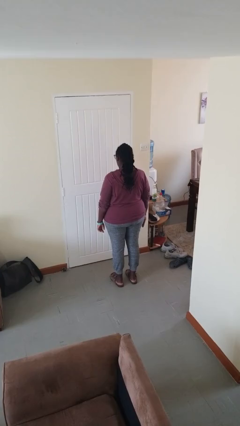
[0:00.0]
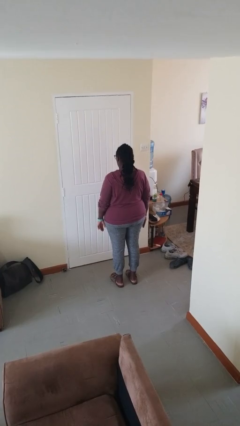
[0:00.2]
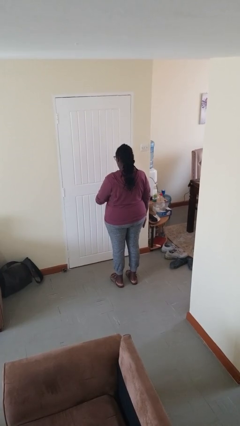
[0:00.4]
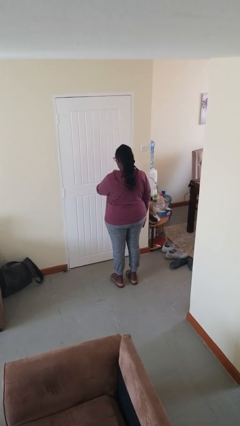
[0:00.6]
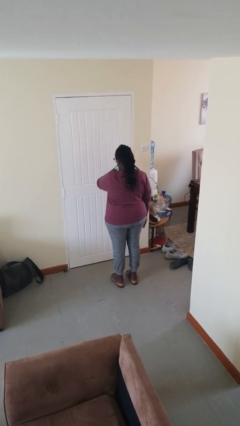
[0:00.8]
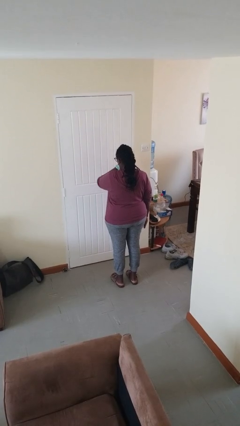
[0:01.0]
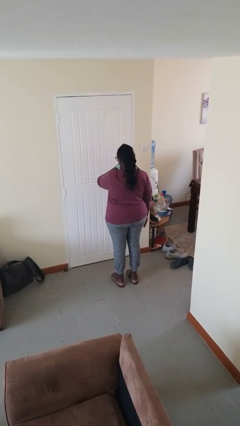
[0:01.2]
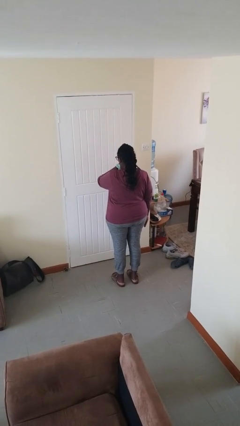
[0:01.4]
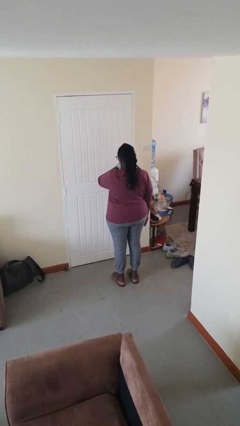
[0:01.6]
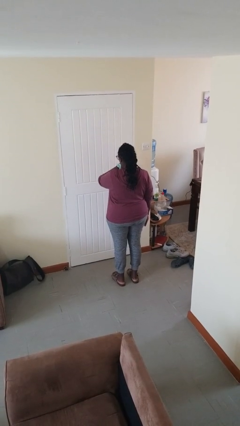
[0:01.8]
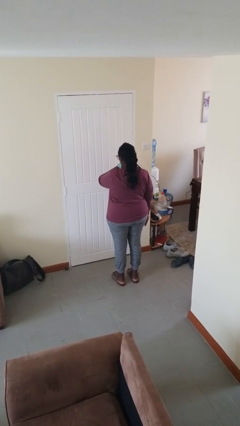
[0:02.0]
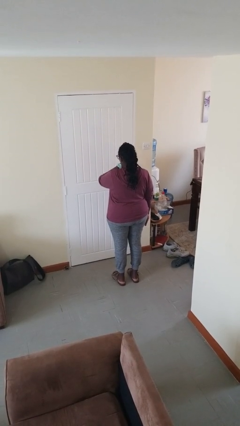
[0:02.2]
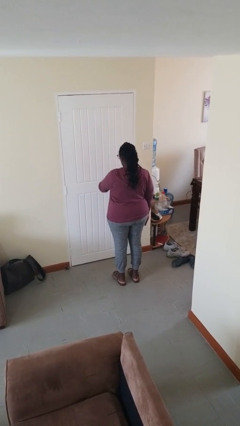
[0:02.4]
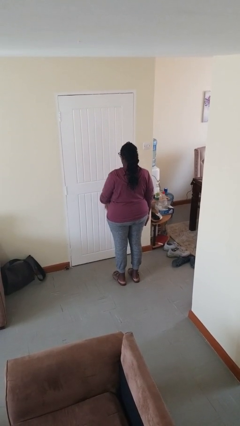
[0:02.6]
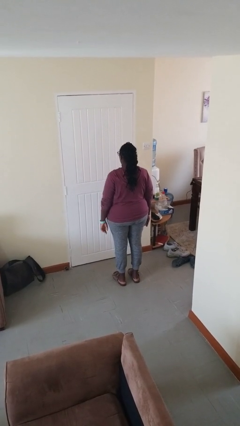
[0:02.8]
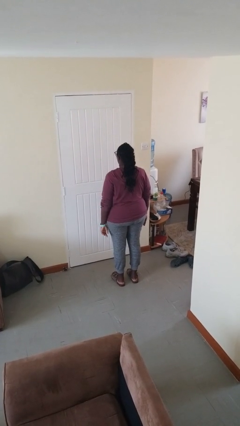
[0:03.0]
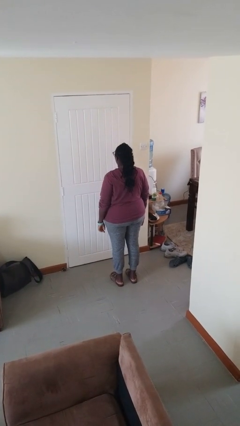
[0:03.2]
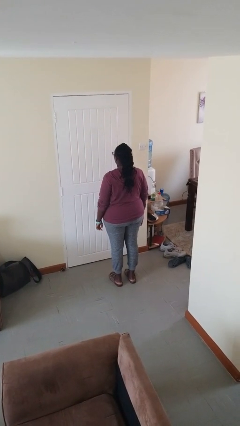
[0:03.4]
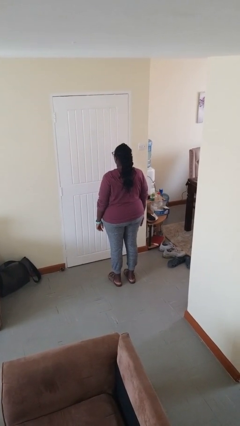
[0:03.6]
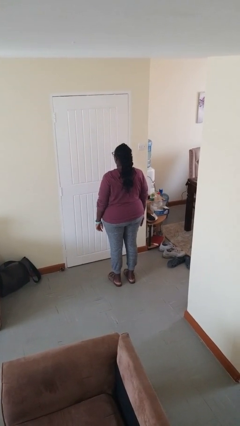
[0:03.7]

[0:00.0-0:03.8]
person looks at wristwatch

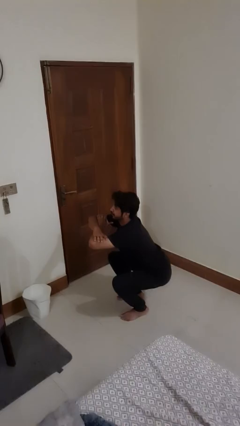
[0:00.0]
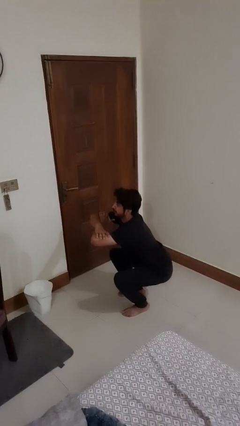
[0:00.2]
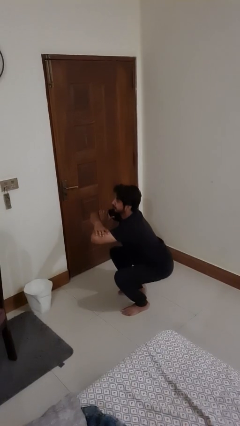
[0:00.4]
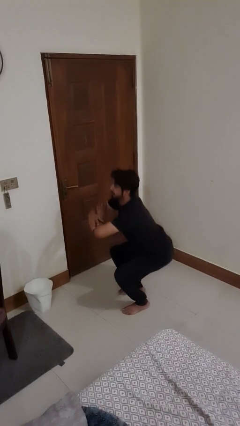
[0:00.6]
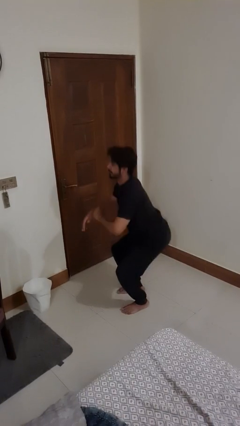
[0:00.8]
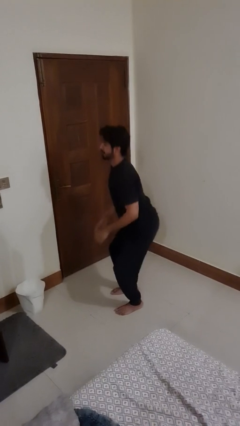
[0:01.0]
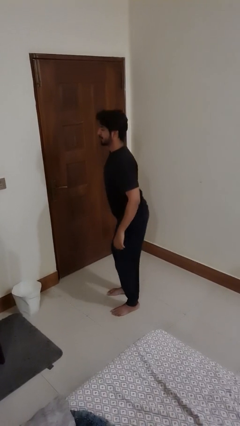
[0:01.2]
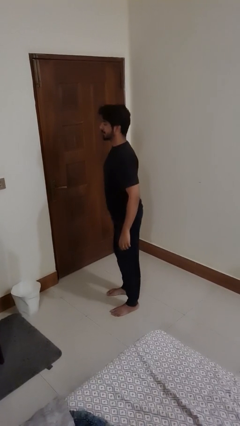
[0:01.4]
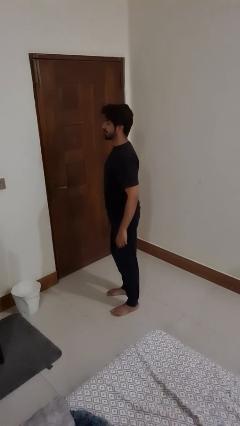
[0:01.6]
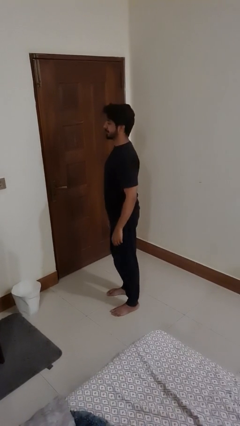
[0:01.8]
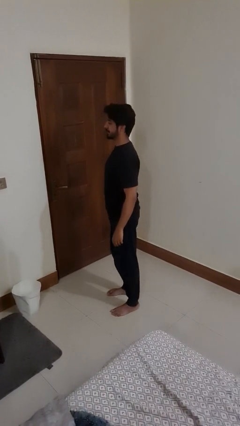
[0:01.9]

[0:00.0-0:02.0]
person stands up

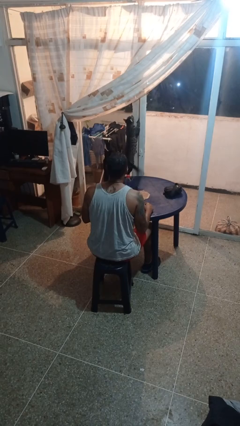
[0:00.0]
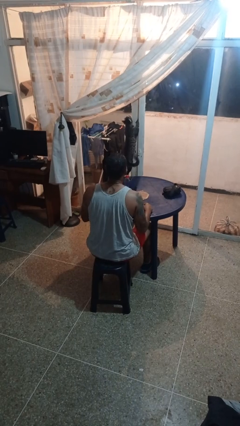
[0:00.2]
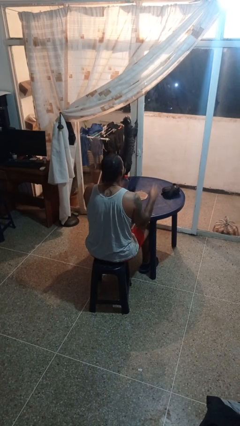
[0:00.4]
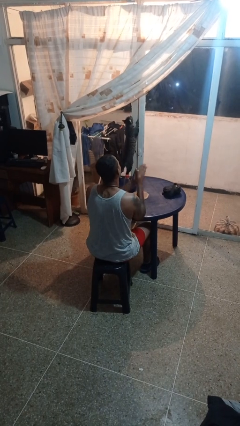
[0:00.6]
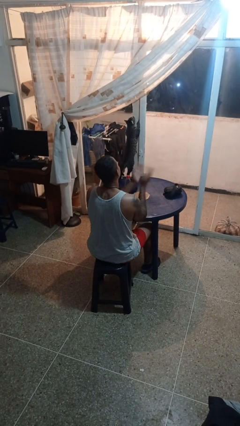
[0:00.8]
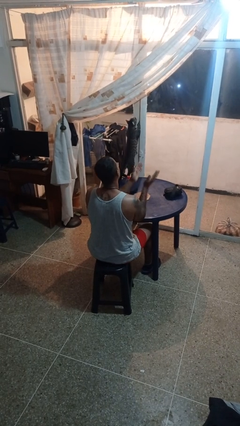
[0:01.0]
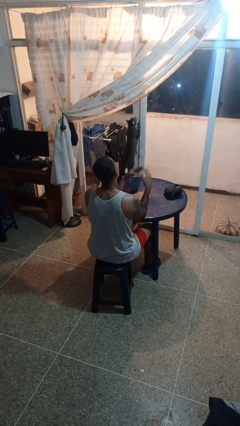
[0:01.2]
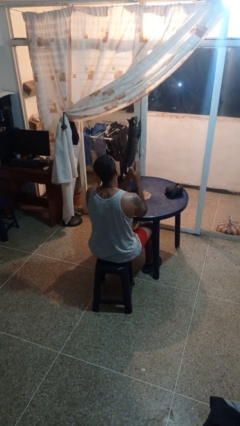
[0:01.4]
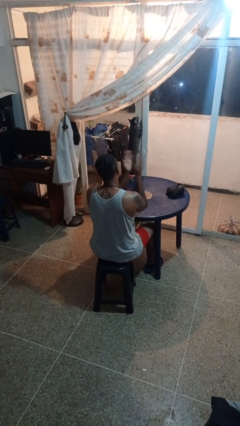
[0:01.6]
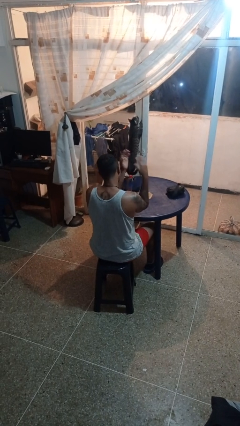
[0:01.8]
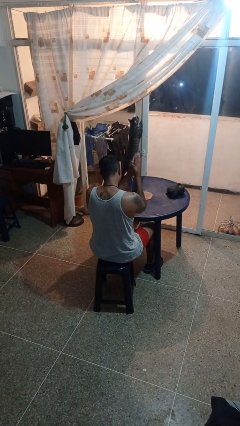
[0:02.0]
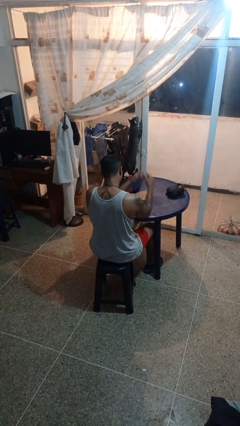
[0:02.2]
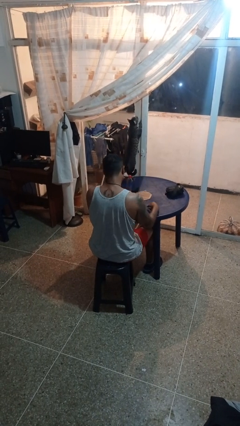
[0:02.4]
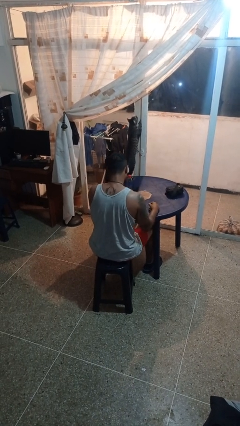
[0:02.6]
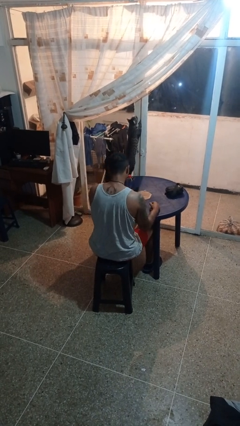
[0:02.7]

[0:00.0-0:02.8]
person claps hands

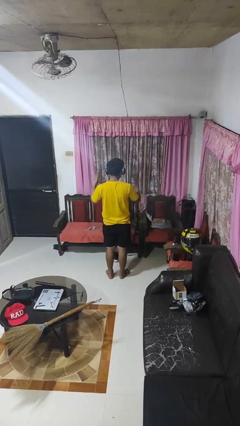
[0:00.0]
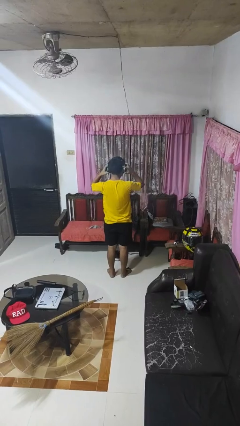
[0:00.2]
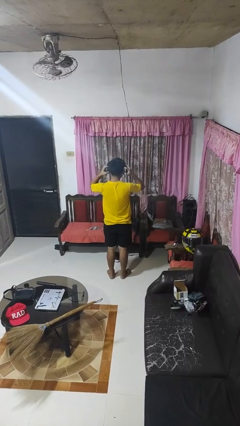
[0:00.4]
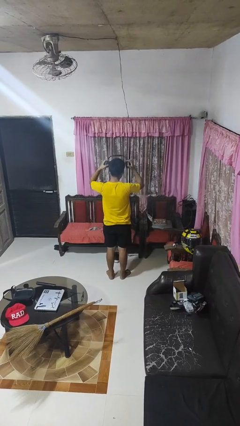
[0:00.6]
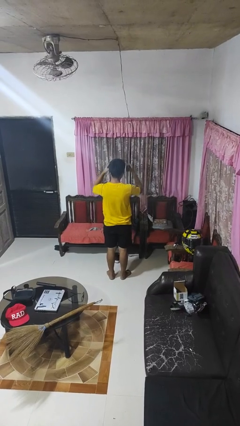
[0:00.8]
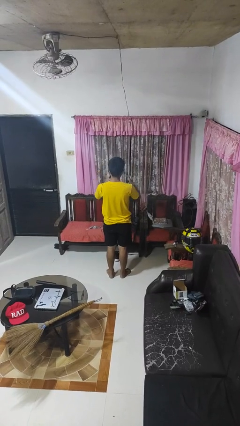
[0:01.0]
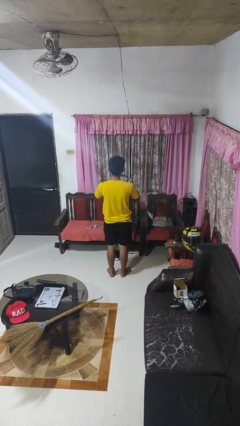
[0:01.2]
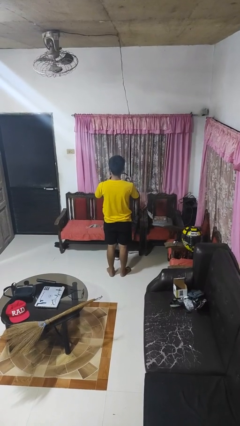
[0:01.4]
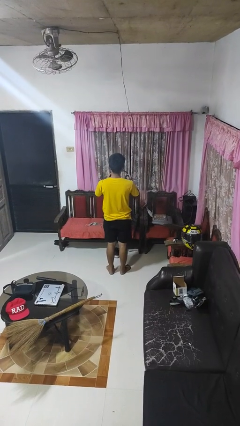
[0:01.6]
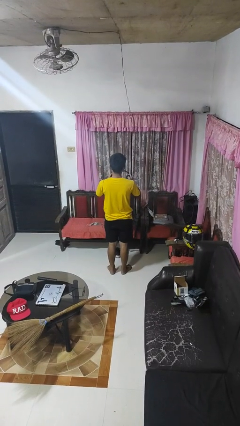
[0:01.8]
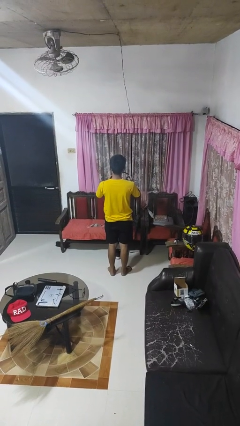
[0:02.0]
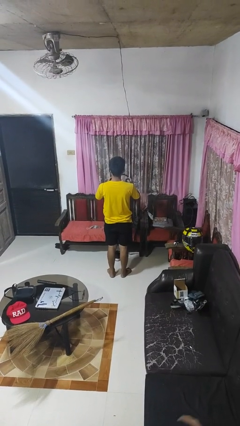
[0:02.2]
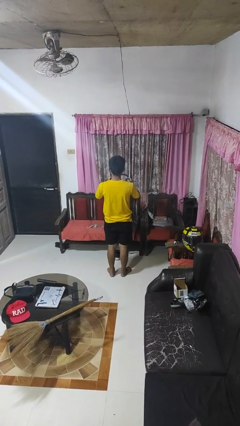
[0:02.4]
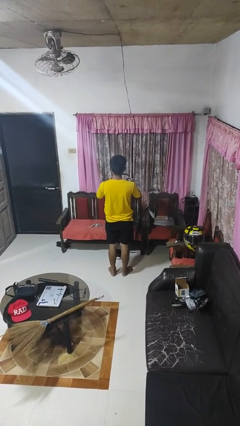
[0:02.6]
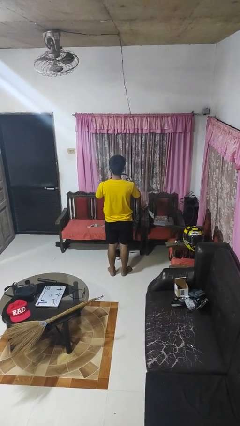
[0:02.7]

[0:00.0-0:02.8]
person takes off headphones

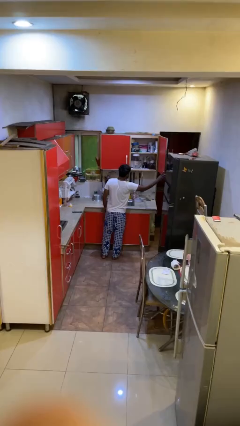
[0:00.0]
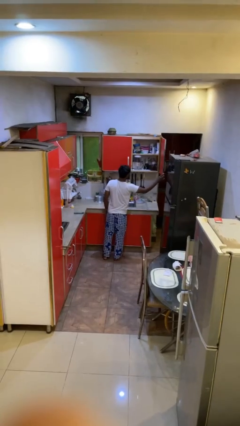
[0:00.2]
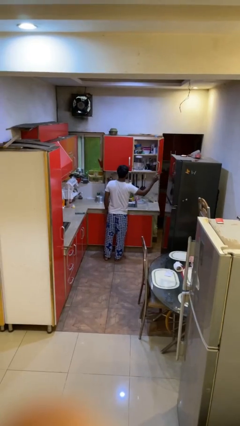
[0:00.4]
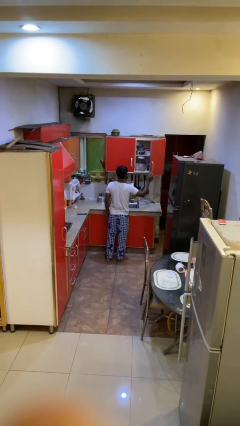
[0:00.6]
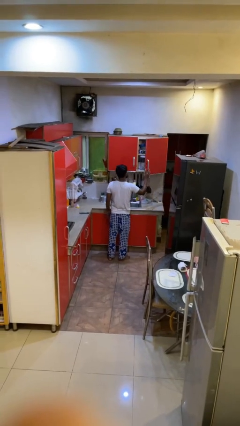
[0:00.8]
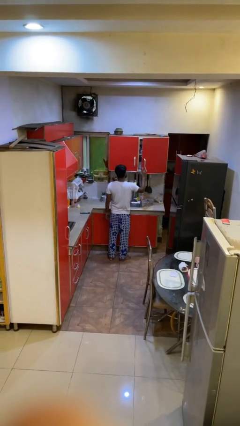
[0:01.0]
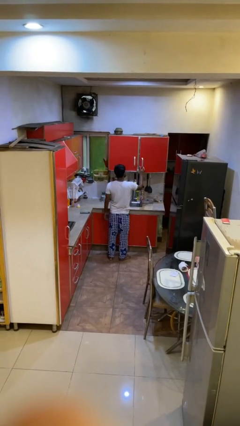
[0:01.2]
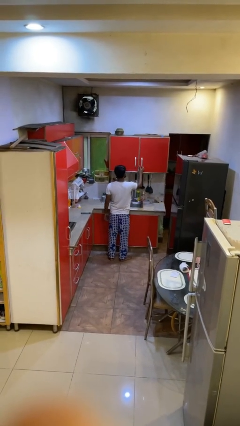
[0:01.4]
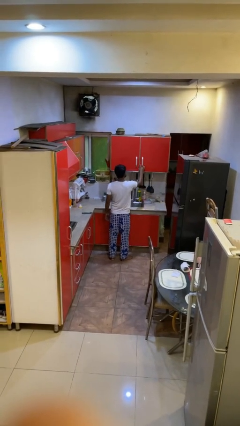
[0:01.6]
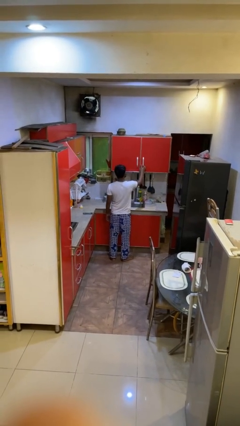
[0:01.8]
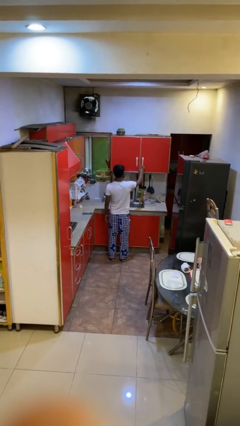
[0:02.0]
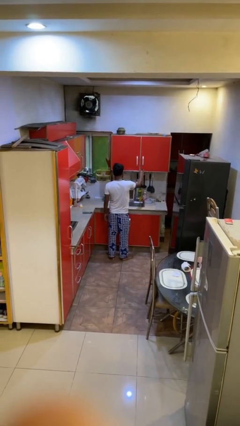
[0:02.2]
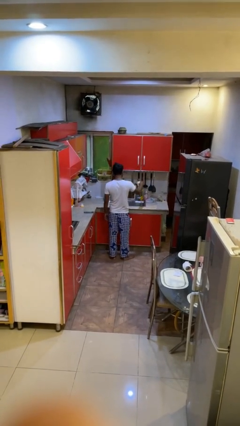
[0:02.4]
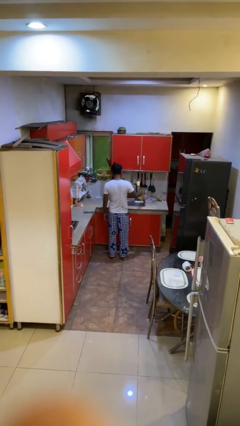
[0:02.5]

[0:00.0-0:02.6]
person closes cabinet

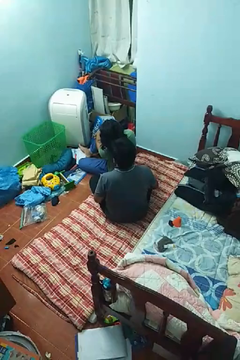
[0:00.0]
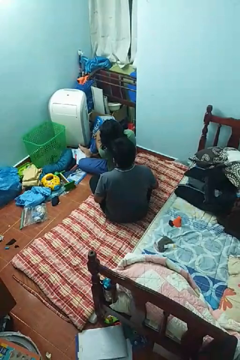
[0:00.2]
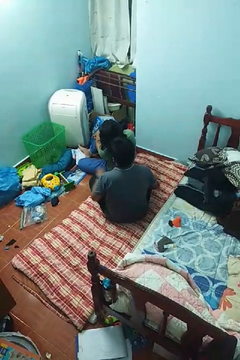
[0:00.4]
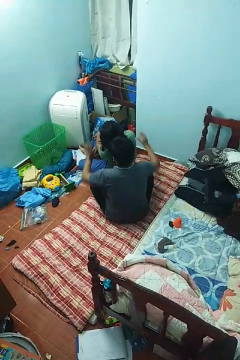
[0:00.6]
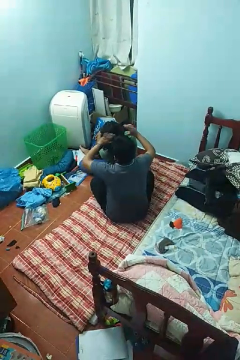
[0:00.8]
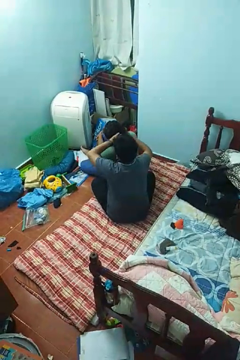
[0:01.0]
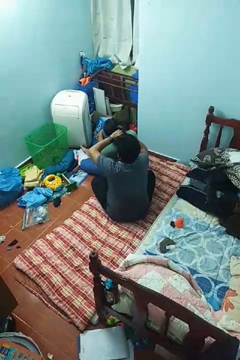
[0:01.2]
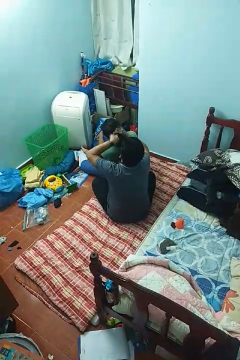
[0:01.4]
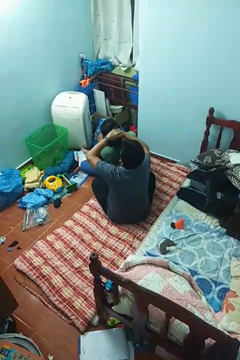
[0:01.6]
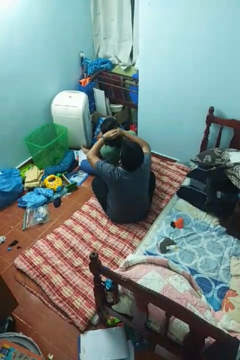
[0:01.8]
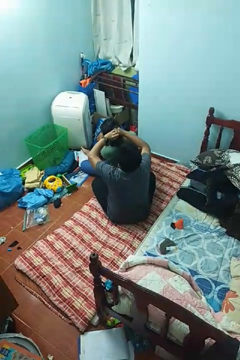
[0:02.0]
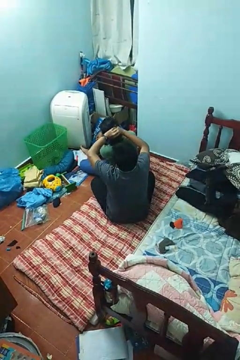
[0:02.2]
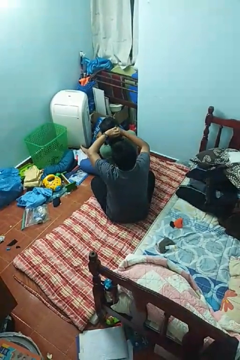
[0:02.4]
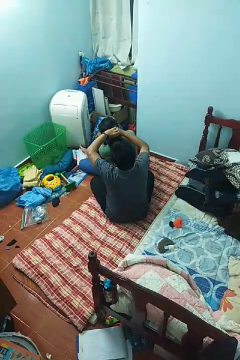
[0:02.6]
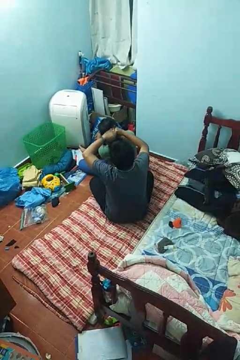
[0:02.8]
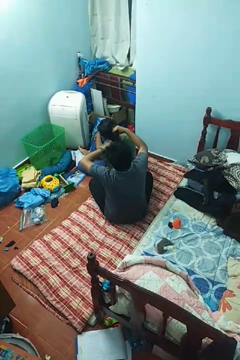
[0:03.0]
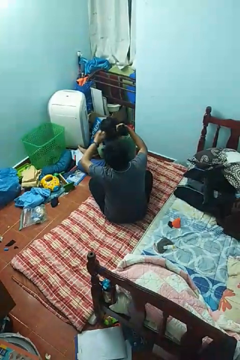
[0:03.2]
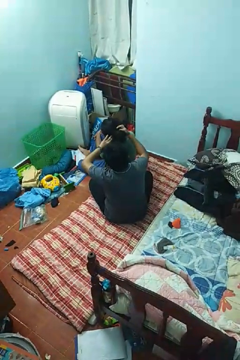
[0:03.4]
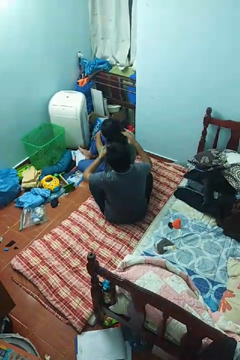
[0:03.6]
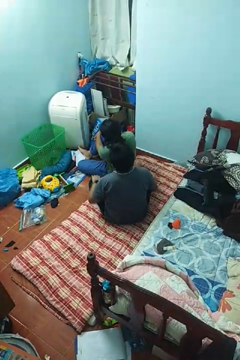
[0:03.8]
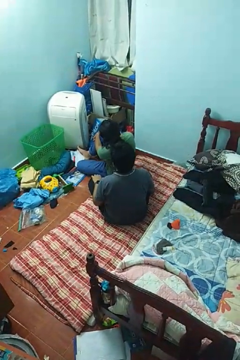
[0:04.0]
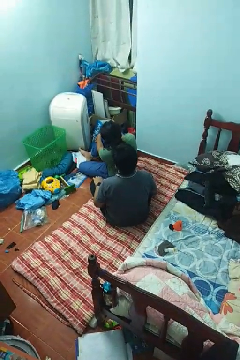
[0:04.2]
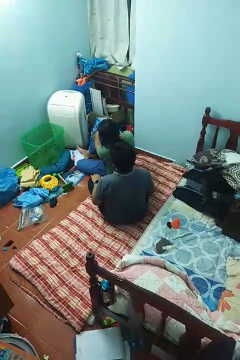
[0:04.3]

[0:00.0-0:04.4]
person braids hair of person
